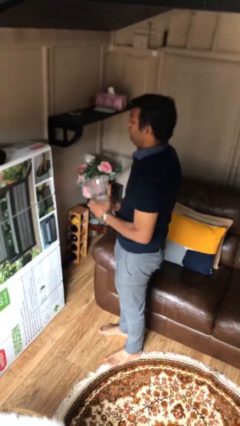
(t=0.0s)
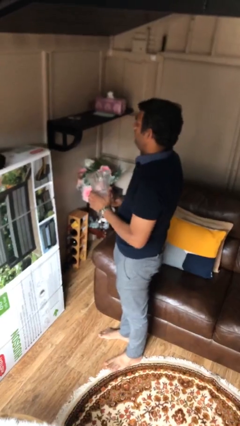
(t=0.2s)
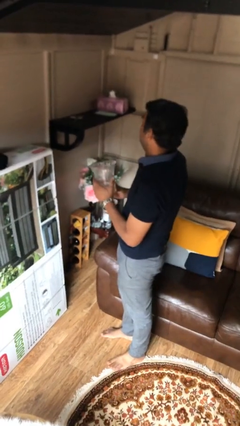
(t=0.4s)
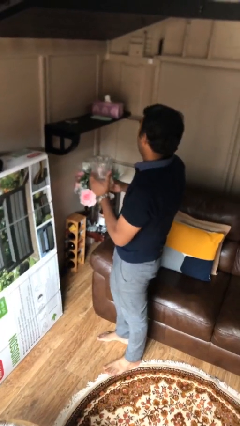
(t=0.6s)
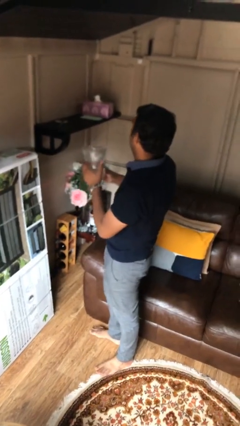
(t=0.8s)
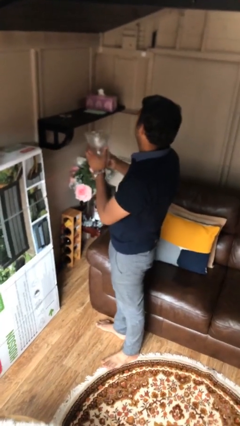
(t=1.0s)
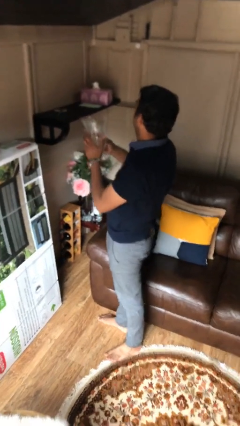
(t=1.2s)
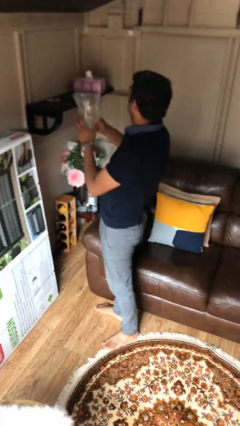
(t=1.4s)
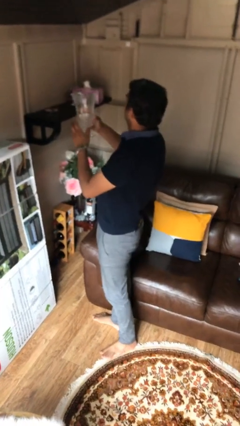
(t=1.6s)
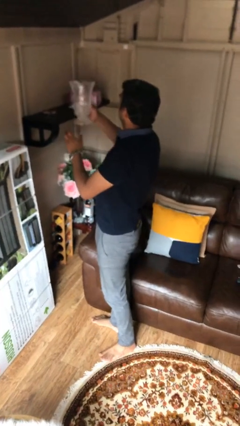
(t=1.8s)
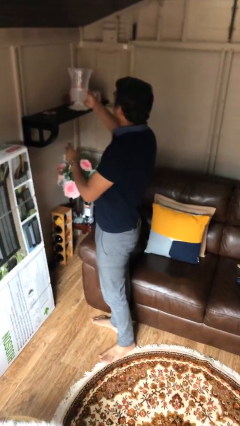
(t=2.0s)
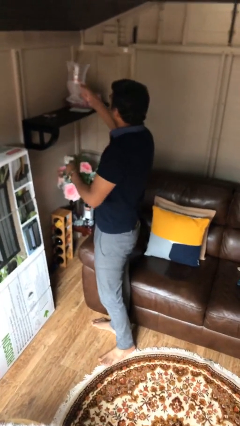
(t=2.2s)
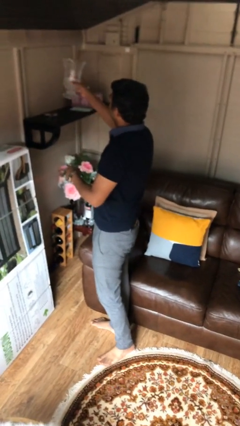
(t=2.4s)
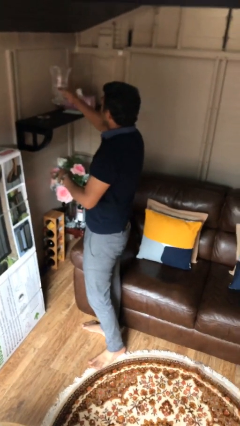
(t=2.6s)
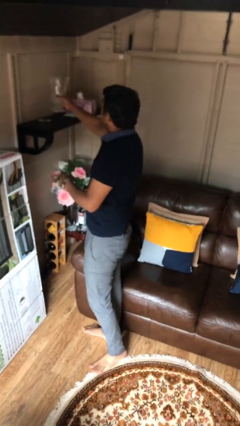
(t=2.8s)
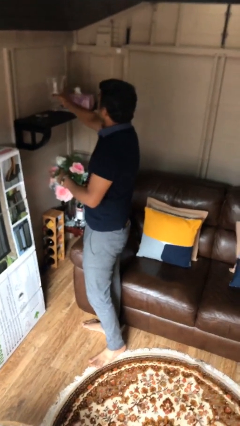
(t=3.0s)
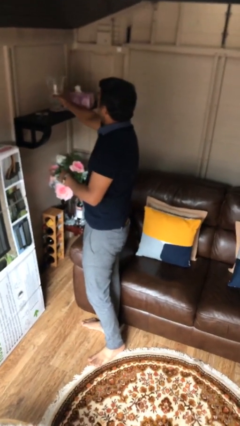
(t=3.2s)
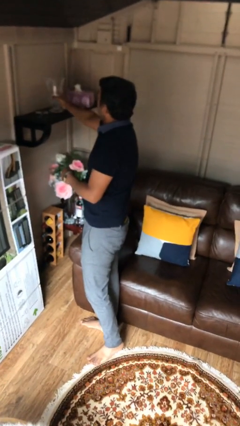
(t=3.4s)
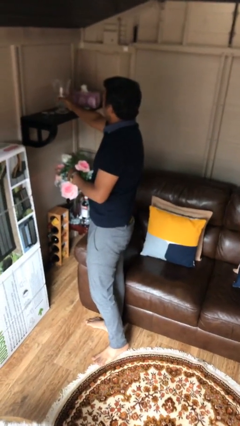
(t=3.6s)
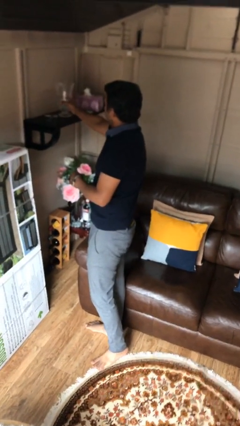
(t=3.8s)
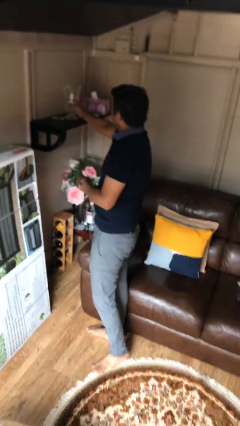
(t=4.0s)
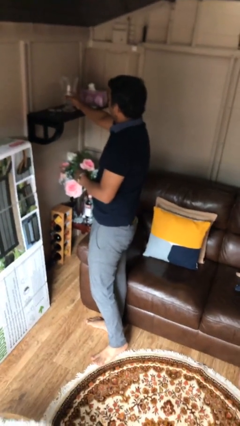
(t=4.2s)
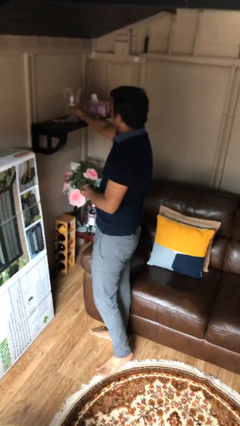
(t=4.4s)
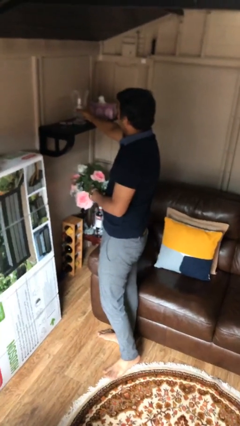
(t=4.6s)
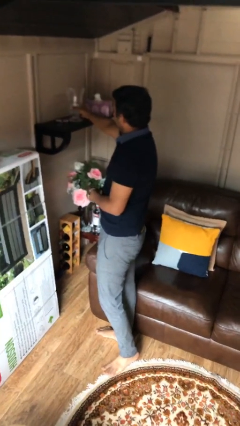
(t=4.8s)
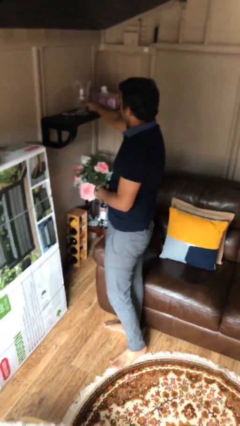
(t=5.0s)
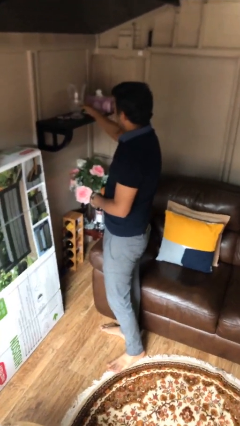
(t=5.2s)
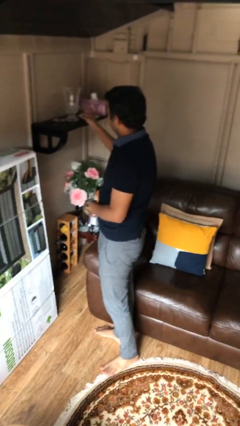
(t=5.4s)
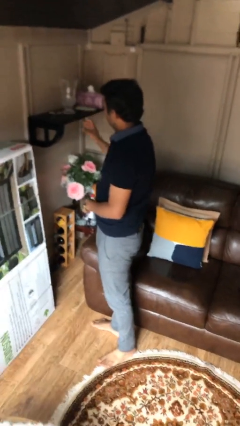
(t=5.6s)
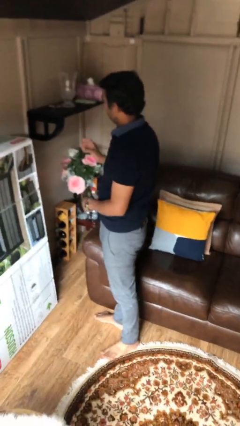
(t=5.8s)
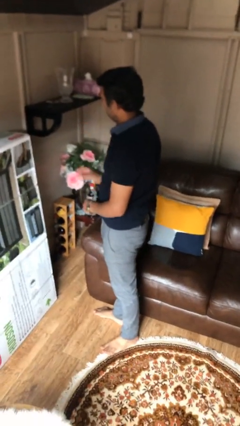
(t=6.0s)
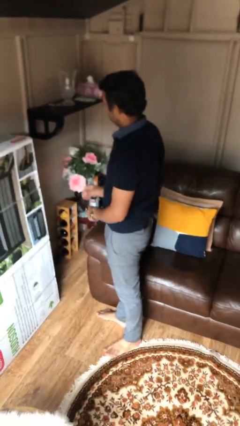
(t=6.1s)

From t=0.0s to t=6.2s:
person puts down object on shelf

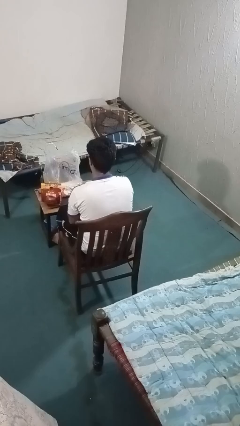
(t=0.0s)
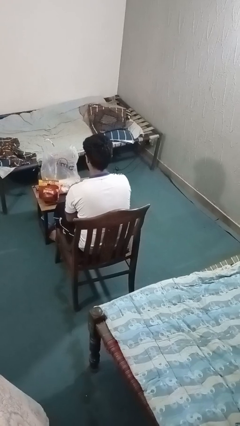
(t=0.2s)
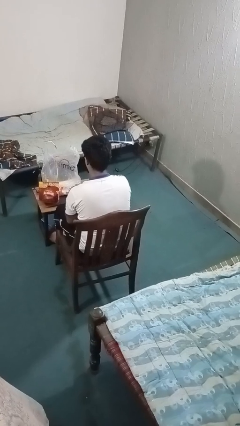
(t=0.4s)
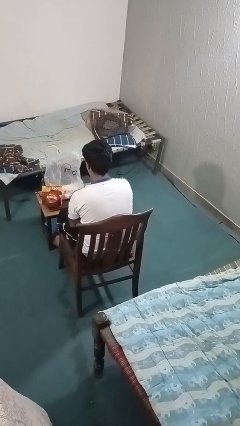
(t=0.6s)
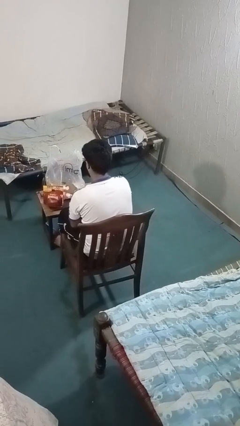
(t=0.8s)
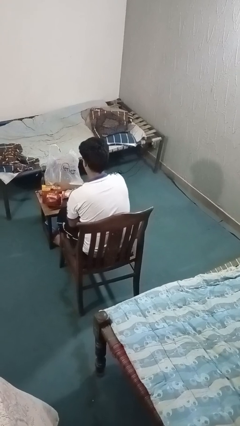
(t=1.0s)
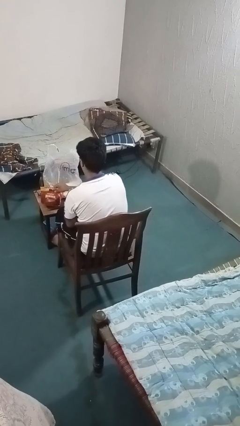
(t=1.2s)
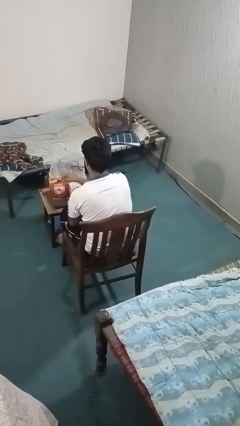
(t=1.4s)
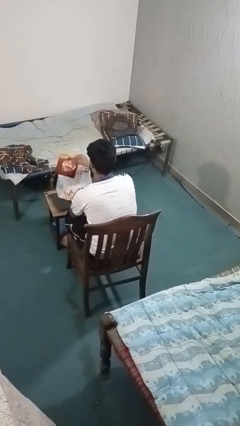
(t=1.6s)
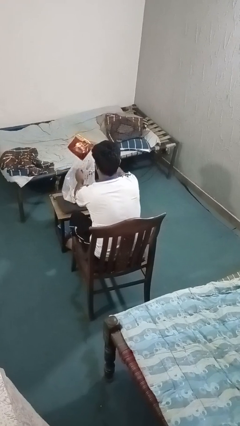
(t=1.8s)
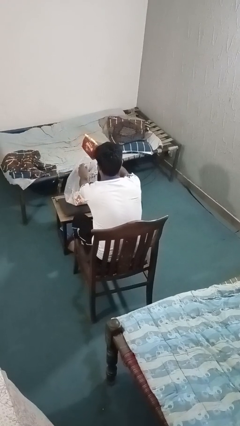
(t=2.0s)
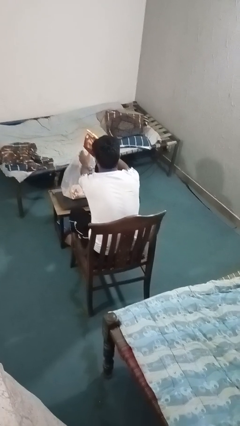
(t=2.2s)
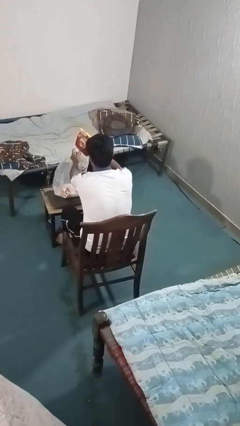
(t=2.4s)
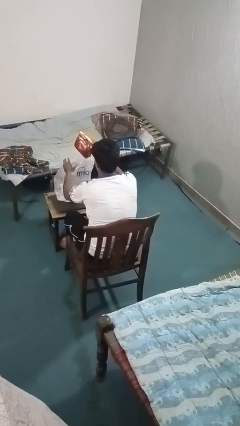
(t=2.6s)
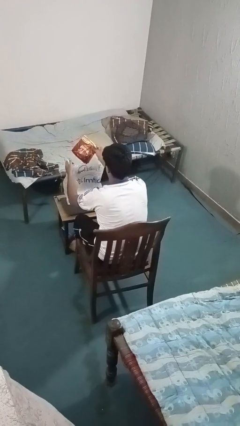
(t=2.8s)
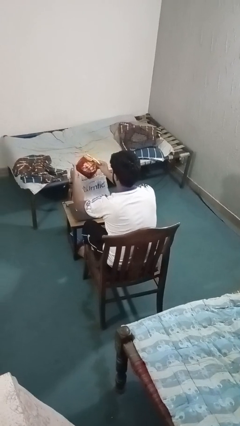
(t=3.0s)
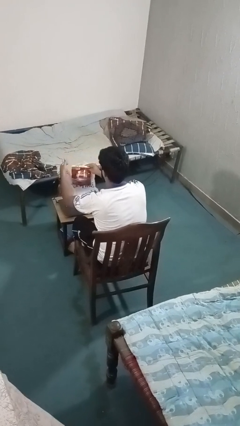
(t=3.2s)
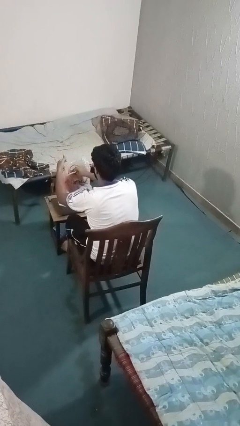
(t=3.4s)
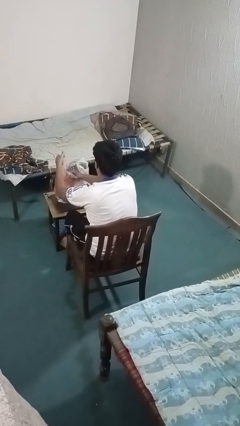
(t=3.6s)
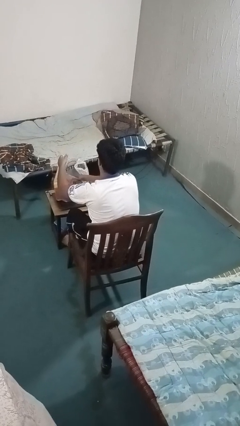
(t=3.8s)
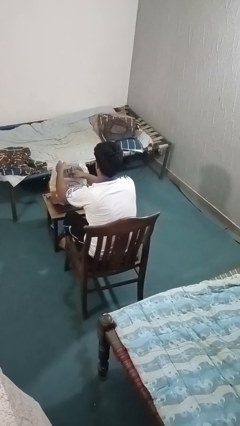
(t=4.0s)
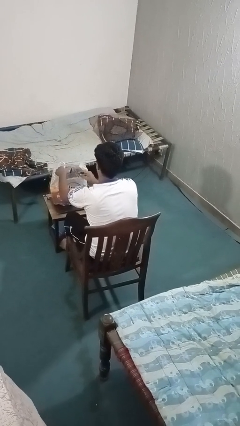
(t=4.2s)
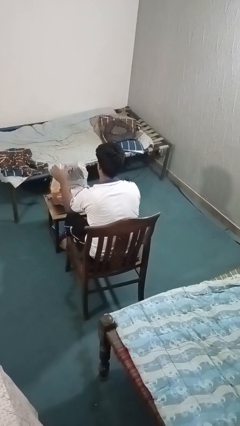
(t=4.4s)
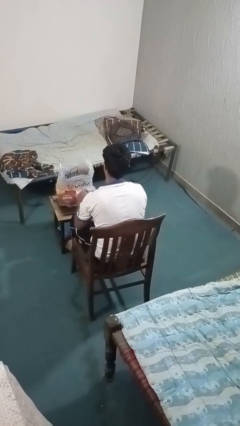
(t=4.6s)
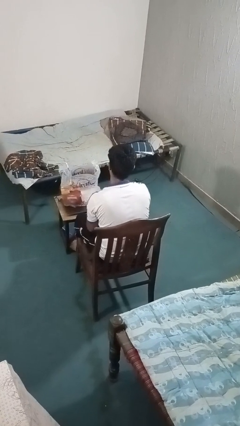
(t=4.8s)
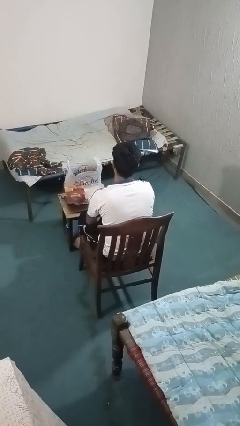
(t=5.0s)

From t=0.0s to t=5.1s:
person puts object into bag

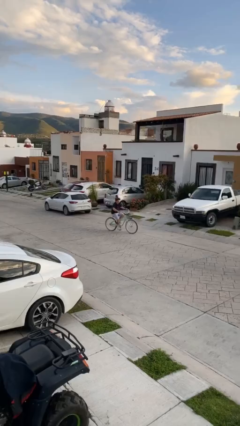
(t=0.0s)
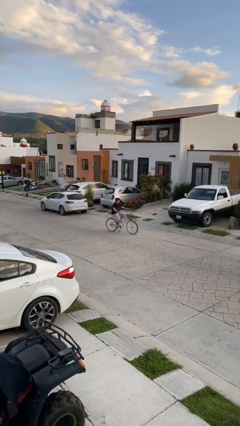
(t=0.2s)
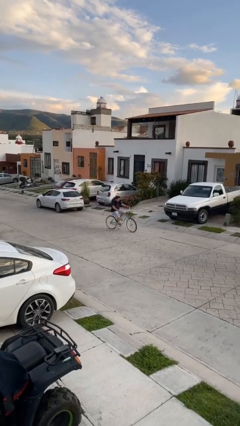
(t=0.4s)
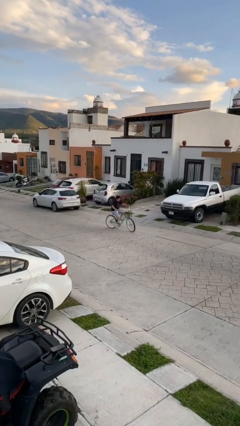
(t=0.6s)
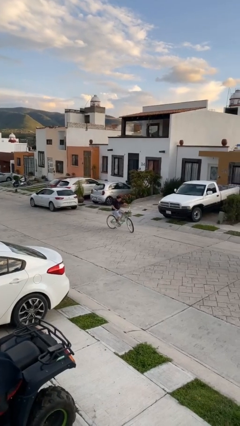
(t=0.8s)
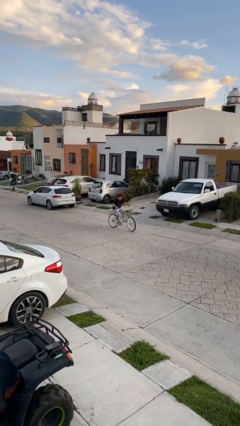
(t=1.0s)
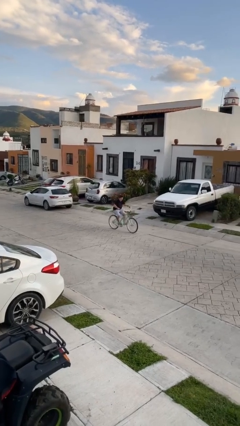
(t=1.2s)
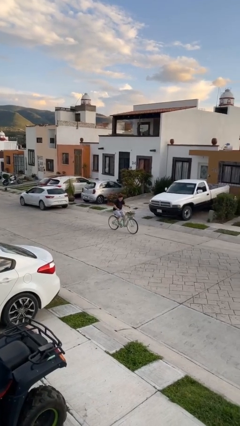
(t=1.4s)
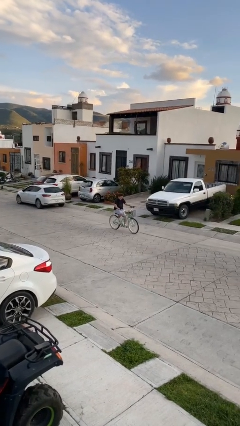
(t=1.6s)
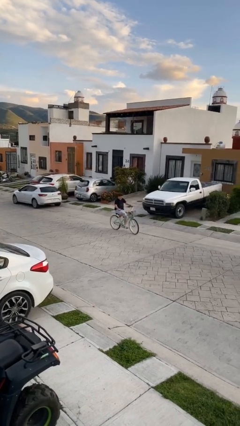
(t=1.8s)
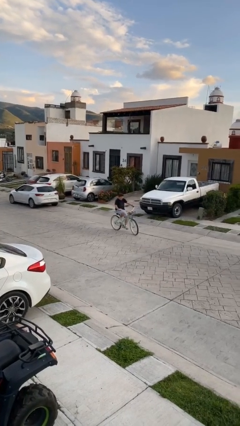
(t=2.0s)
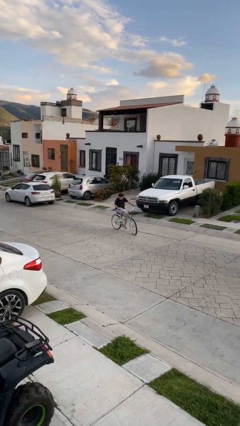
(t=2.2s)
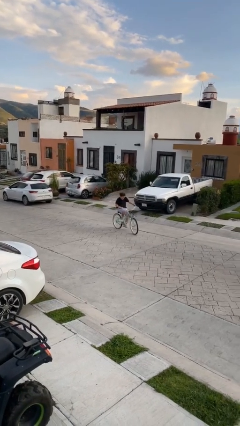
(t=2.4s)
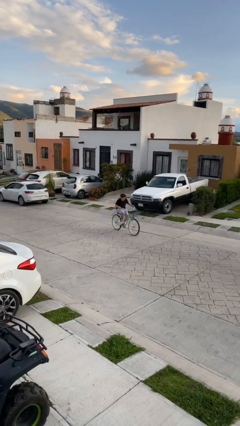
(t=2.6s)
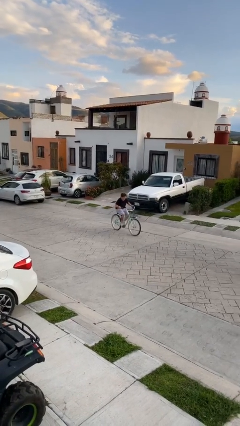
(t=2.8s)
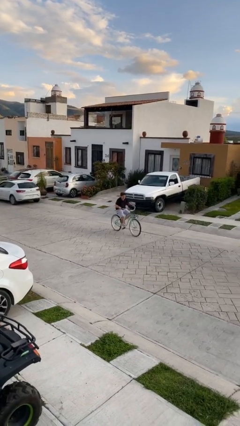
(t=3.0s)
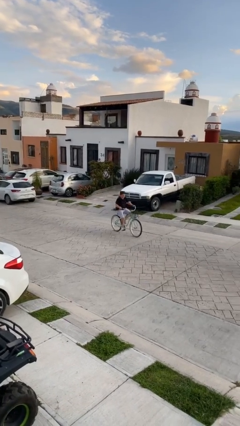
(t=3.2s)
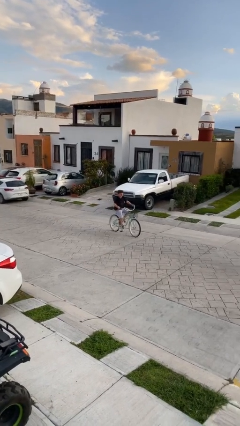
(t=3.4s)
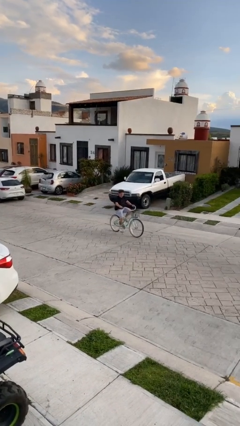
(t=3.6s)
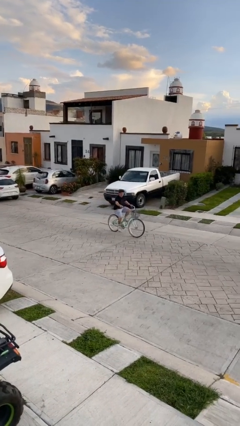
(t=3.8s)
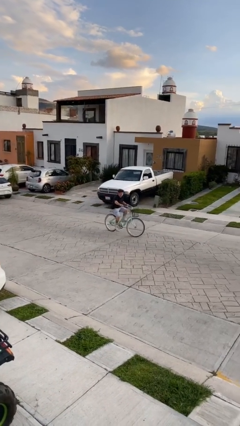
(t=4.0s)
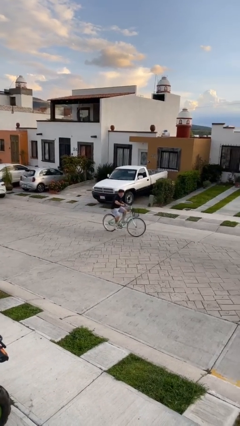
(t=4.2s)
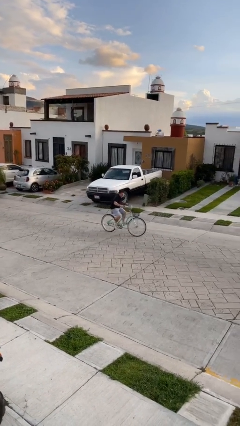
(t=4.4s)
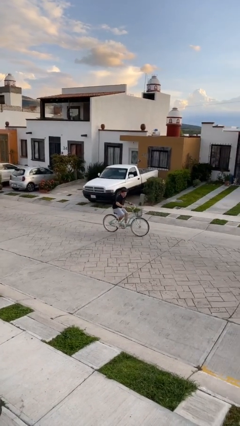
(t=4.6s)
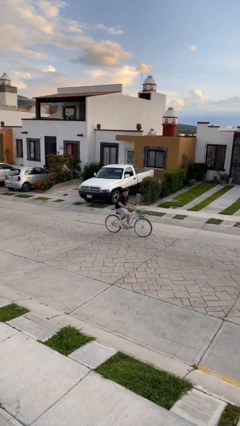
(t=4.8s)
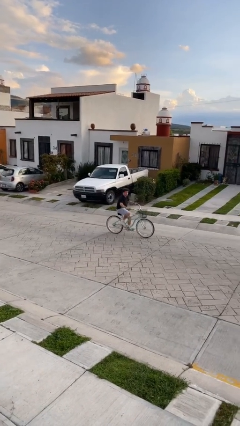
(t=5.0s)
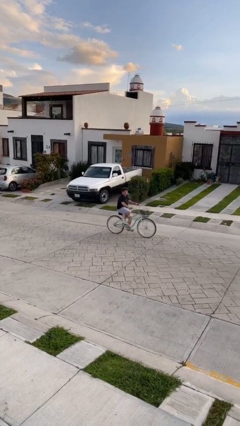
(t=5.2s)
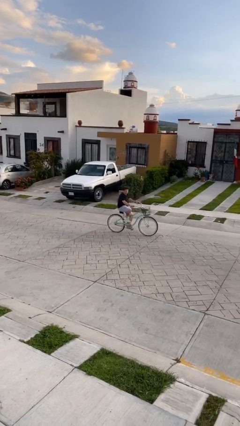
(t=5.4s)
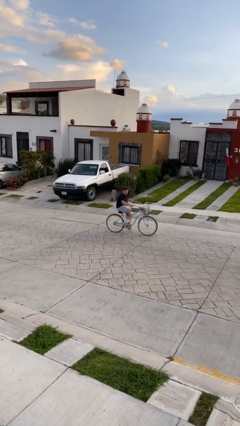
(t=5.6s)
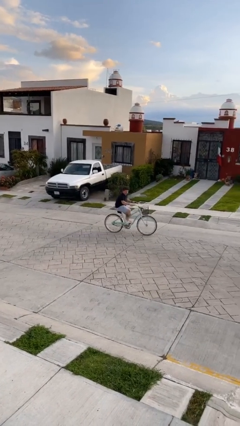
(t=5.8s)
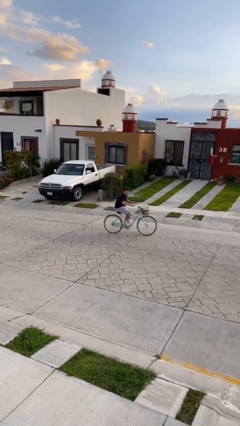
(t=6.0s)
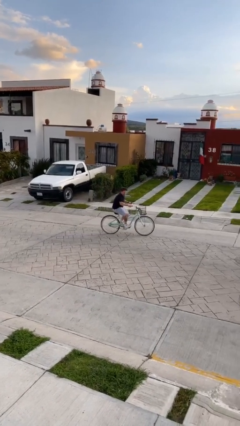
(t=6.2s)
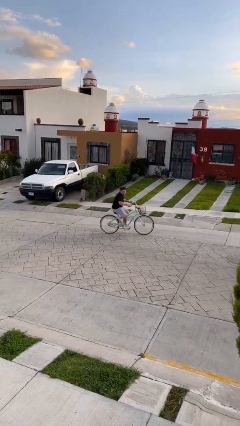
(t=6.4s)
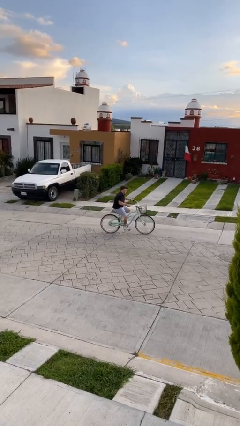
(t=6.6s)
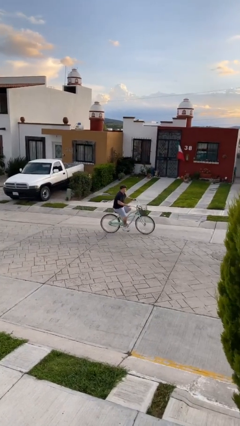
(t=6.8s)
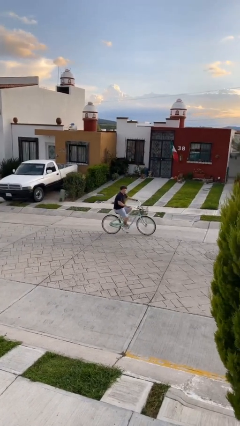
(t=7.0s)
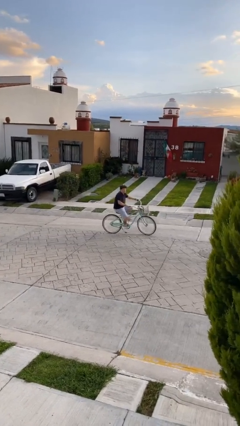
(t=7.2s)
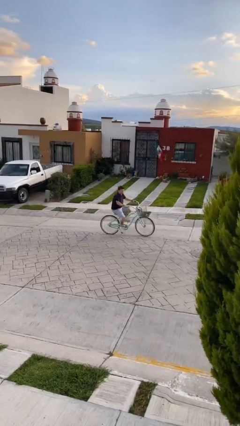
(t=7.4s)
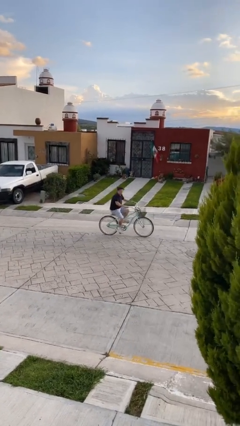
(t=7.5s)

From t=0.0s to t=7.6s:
person rides bicycle
